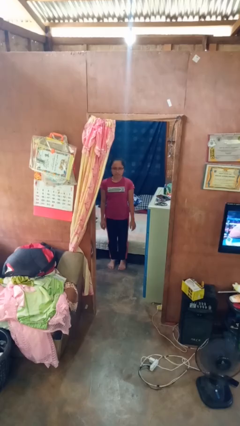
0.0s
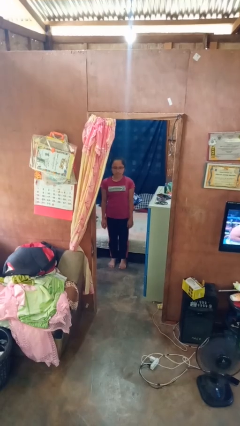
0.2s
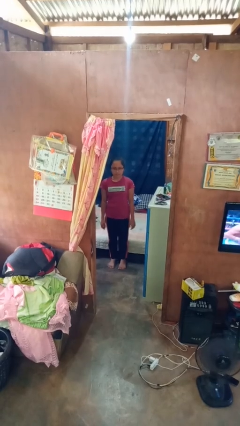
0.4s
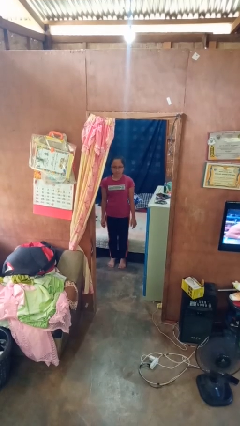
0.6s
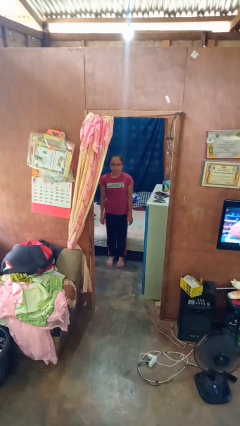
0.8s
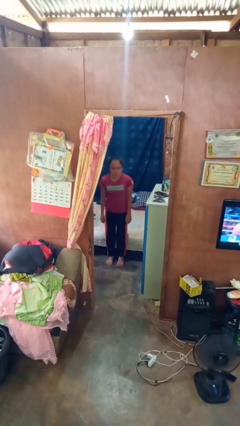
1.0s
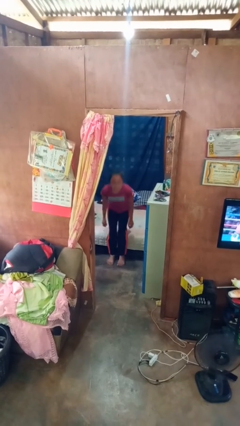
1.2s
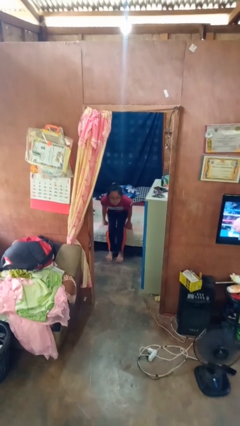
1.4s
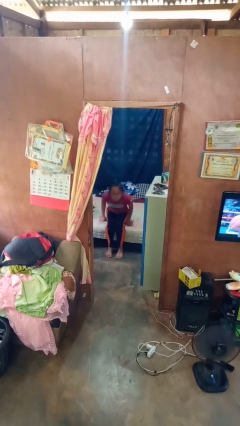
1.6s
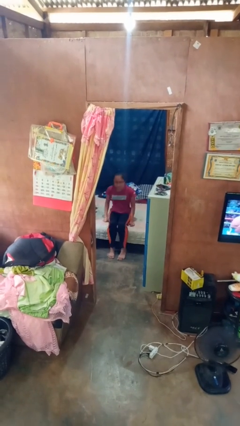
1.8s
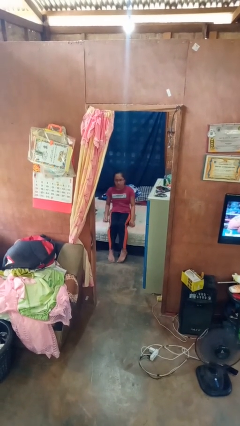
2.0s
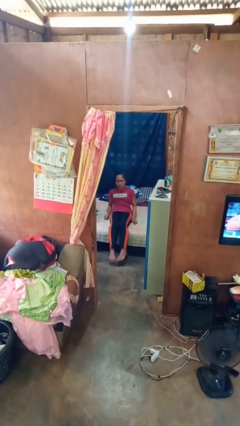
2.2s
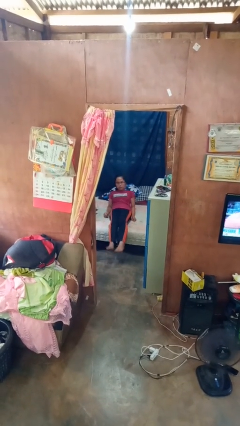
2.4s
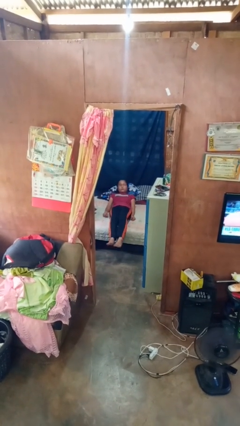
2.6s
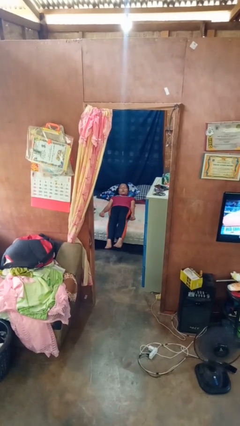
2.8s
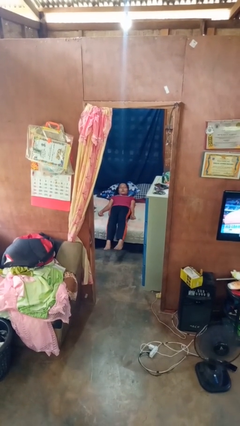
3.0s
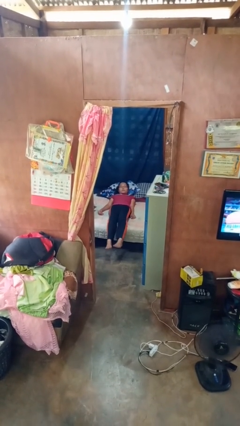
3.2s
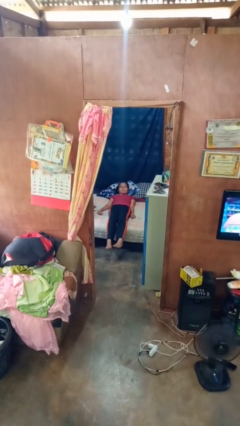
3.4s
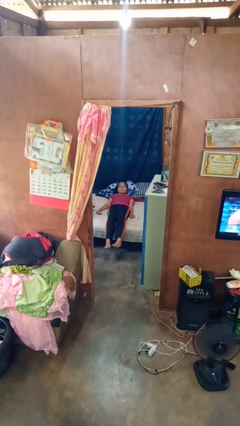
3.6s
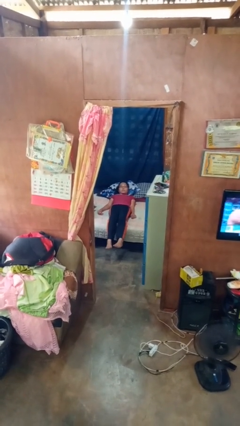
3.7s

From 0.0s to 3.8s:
person lies down on bed

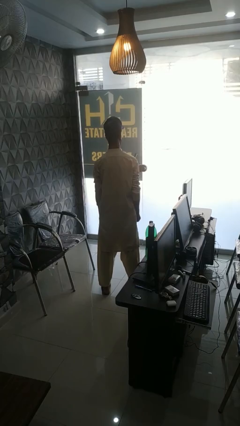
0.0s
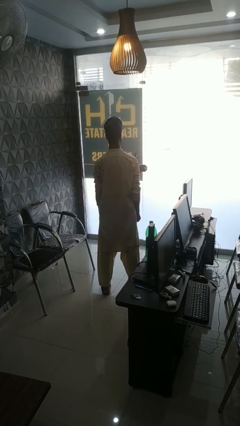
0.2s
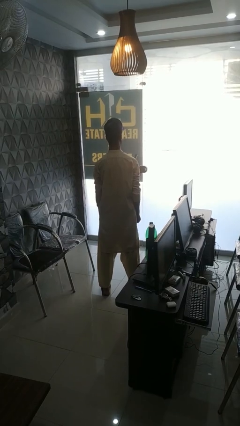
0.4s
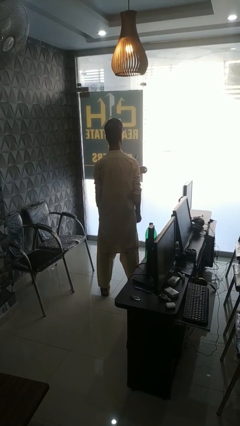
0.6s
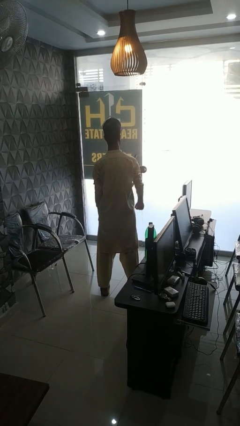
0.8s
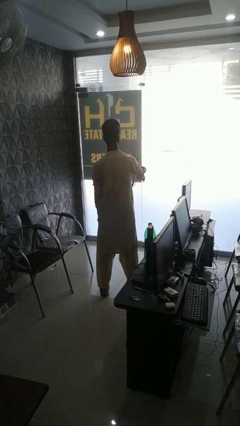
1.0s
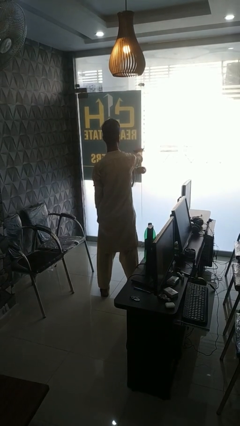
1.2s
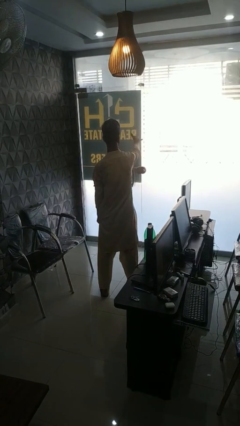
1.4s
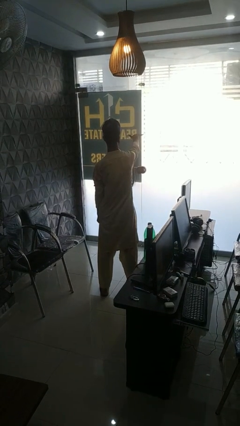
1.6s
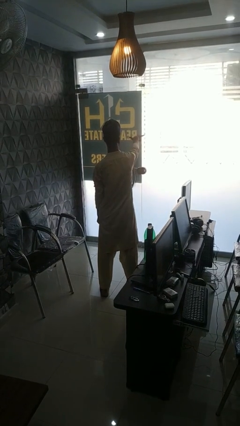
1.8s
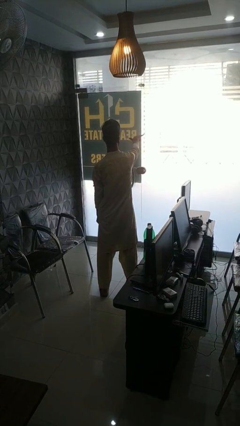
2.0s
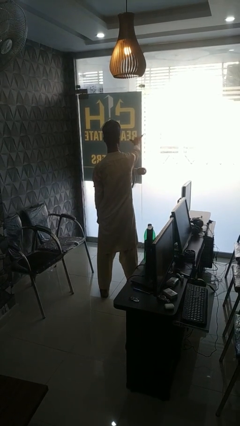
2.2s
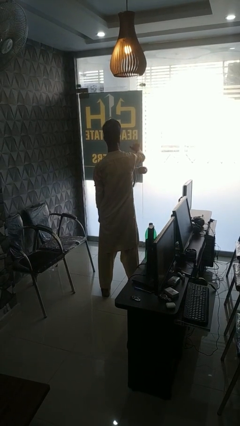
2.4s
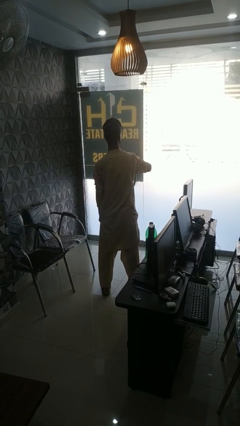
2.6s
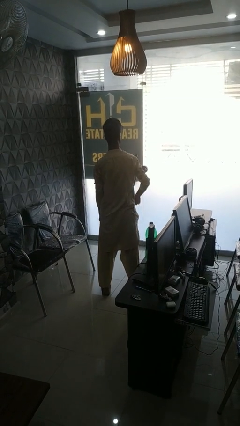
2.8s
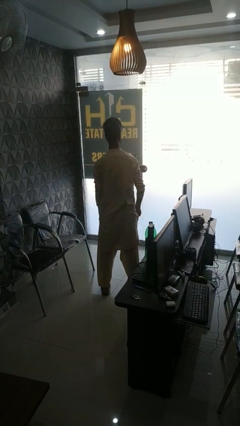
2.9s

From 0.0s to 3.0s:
person gestures hang loose

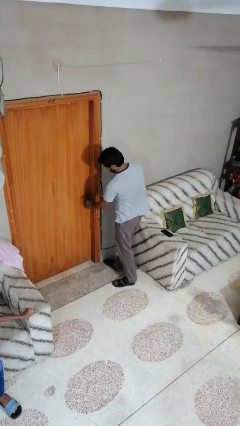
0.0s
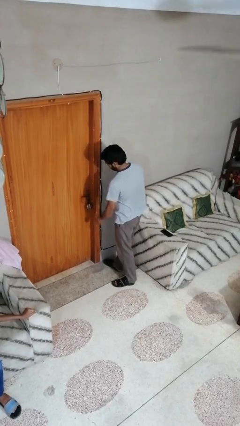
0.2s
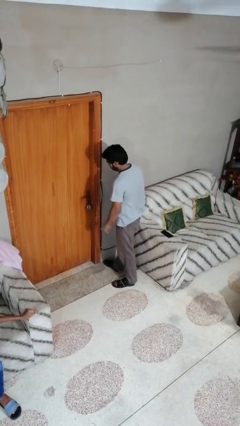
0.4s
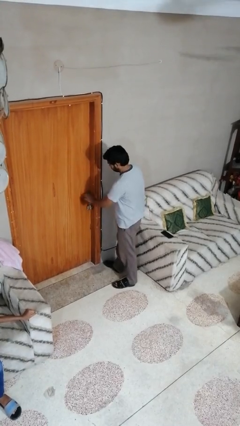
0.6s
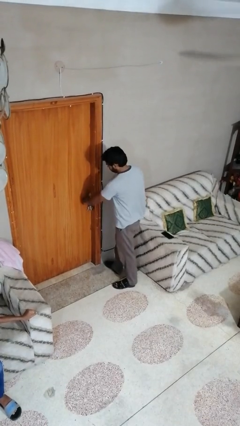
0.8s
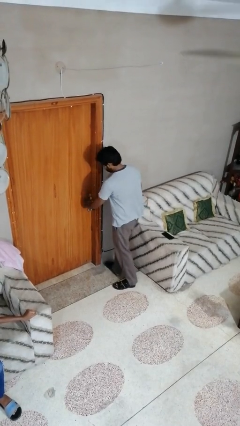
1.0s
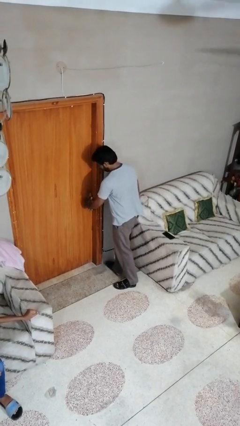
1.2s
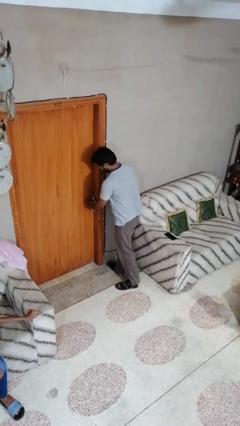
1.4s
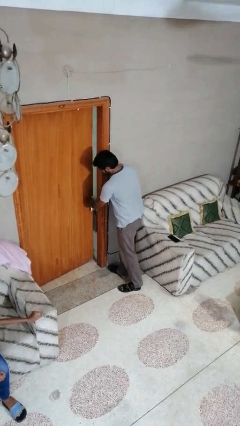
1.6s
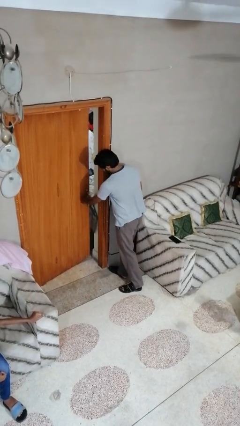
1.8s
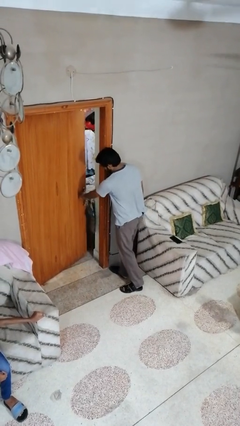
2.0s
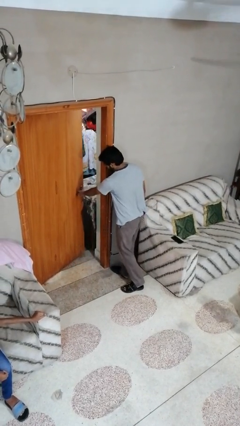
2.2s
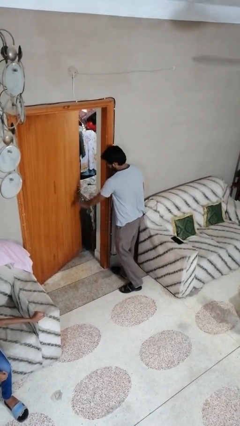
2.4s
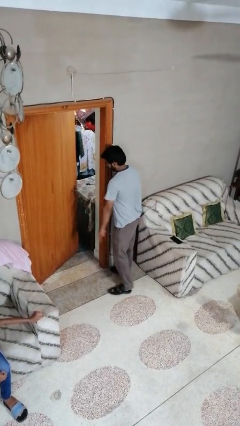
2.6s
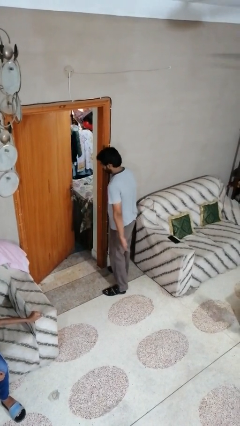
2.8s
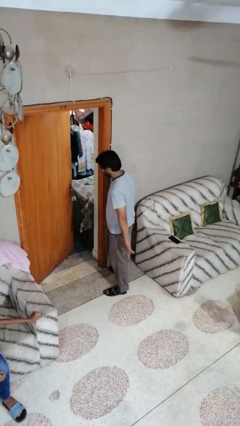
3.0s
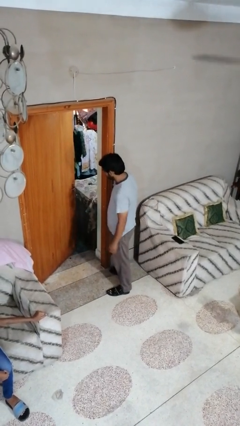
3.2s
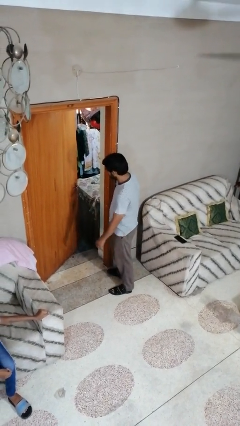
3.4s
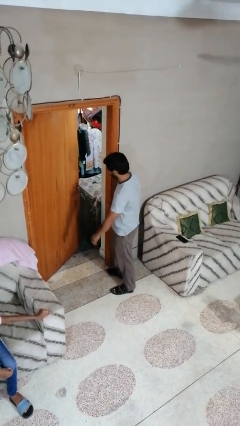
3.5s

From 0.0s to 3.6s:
person opens facility door

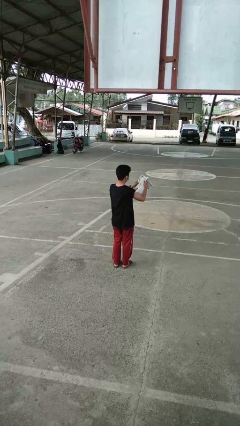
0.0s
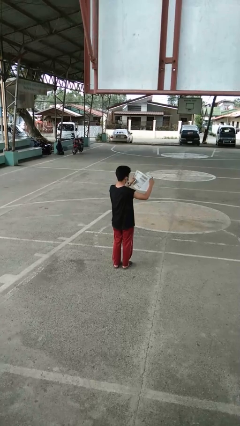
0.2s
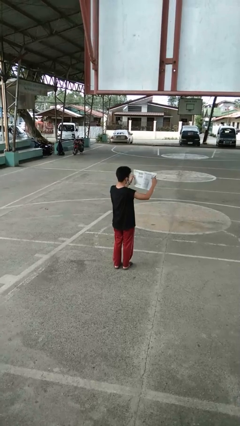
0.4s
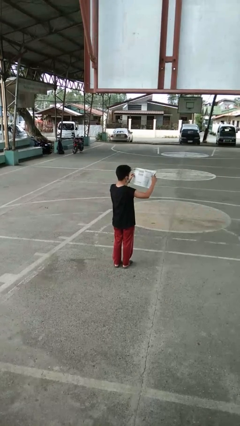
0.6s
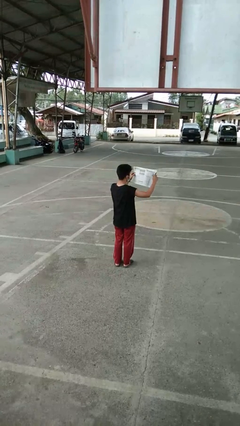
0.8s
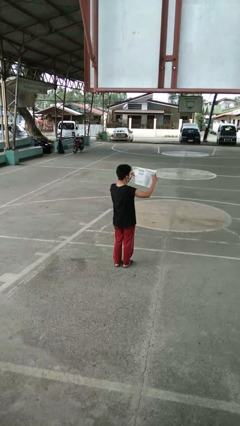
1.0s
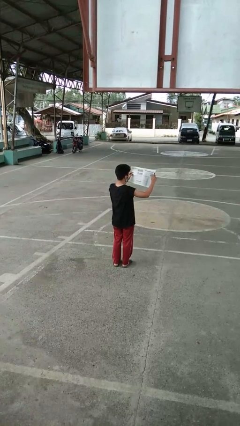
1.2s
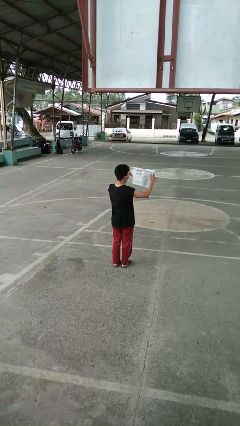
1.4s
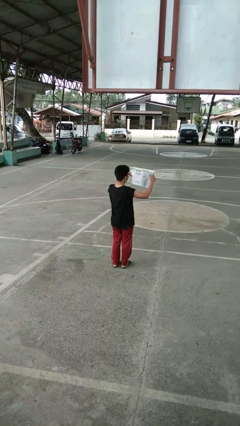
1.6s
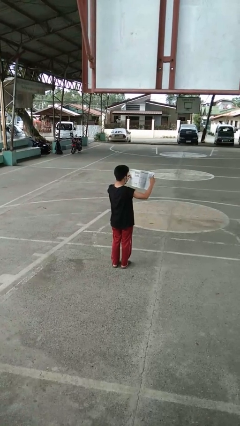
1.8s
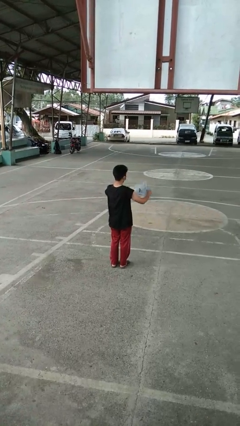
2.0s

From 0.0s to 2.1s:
person reads newspaper

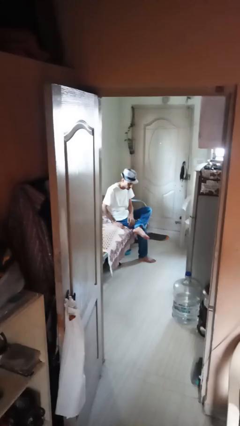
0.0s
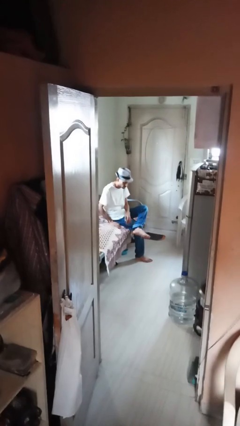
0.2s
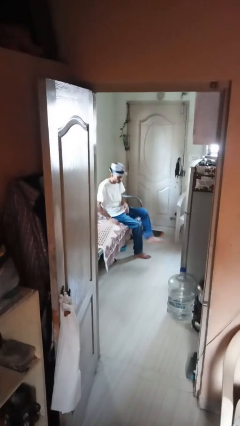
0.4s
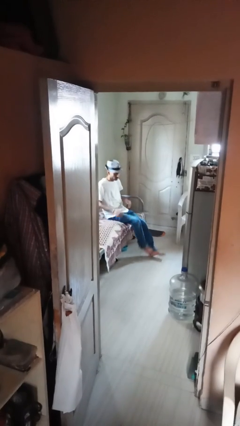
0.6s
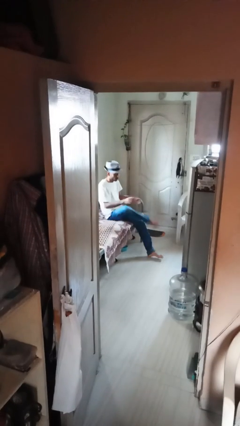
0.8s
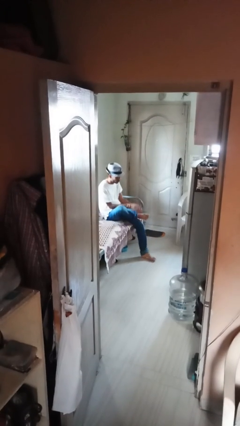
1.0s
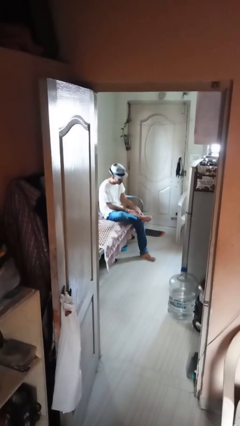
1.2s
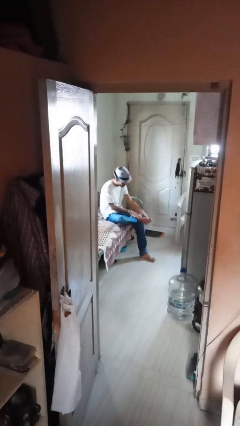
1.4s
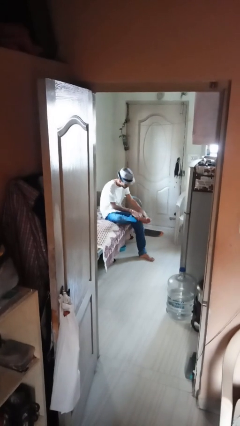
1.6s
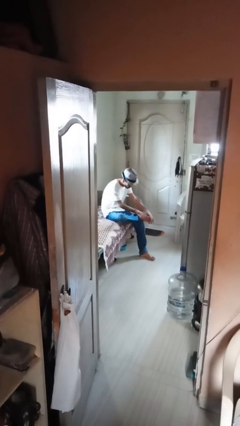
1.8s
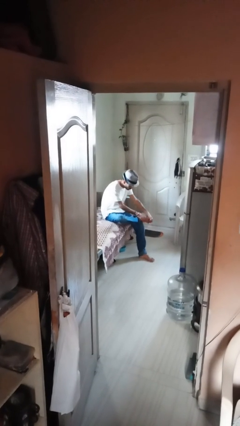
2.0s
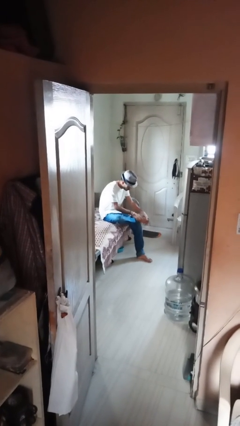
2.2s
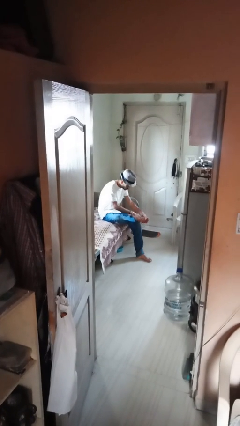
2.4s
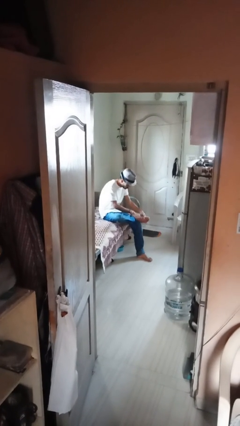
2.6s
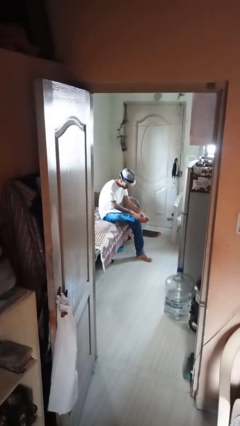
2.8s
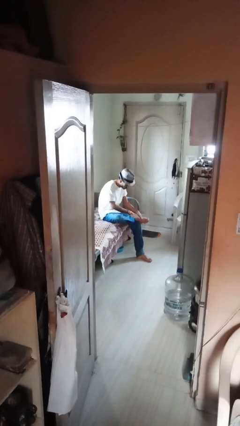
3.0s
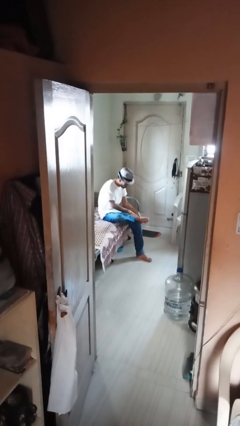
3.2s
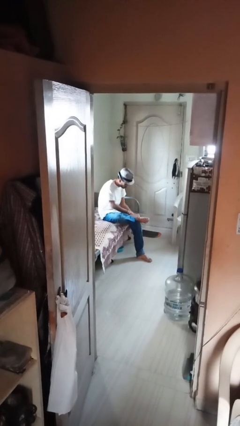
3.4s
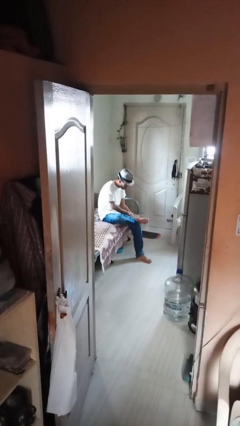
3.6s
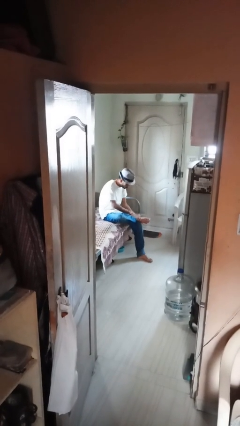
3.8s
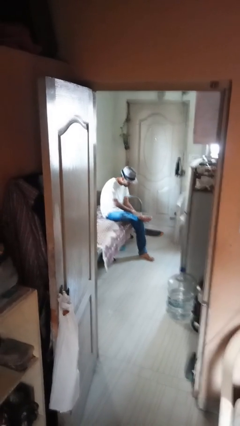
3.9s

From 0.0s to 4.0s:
person rubs foot

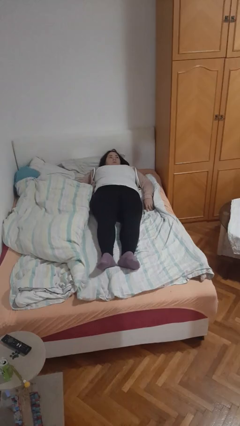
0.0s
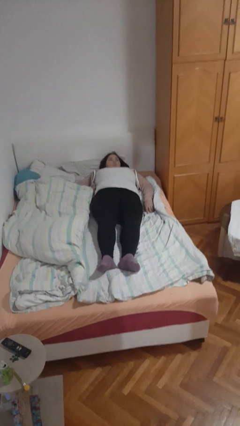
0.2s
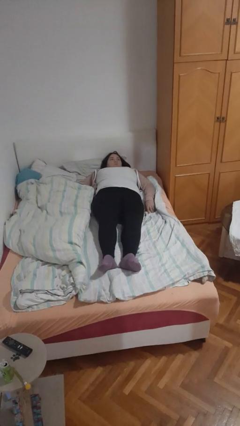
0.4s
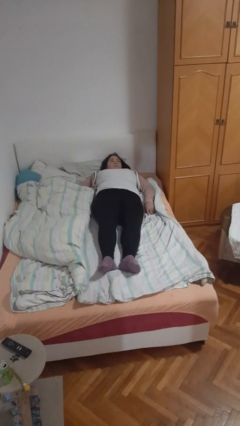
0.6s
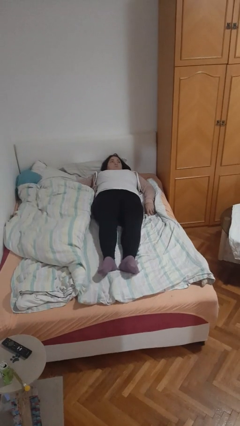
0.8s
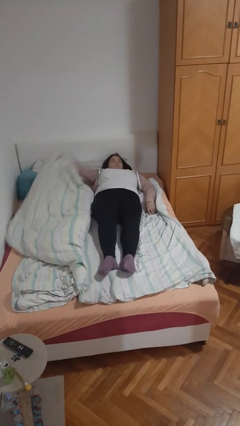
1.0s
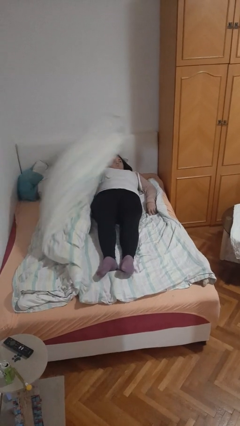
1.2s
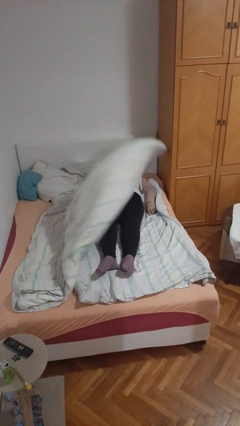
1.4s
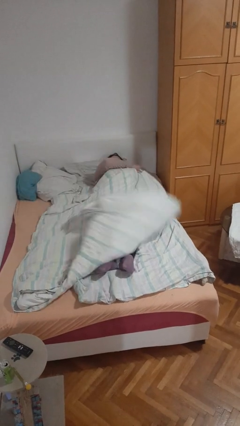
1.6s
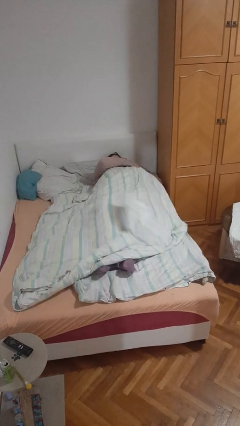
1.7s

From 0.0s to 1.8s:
person covers with bedsheets
